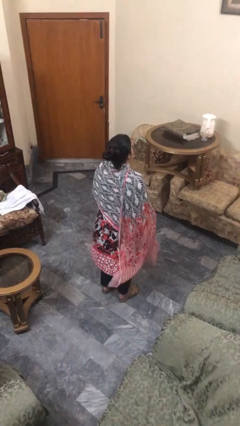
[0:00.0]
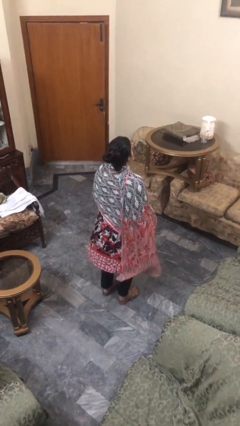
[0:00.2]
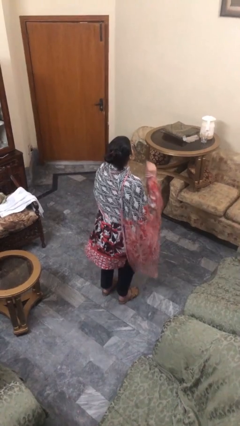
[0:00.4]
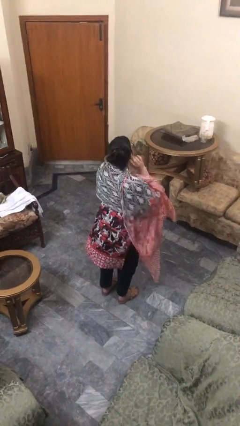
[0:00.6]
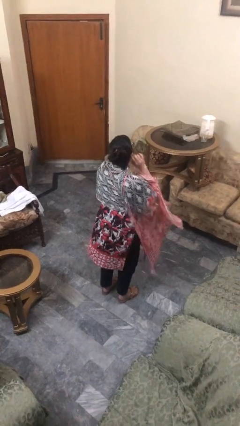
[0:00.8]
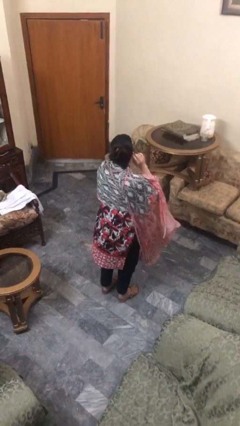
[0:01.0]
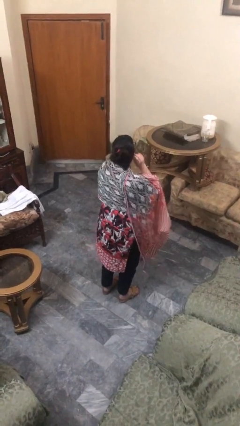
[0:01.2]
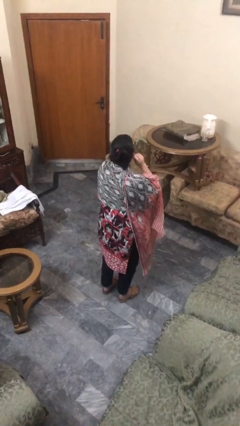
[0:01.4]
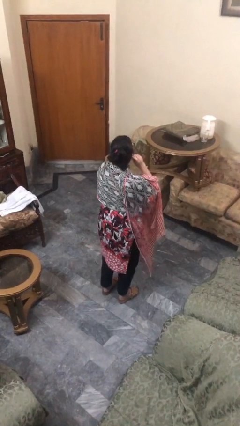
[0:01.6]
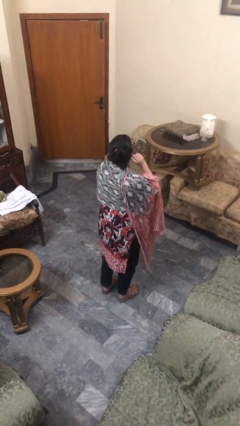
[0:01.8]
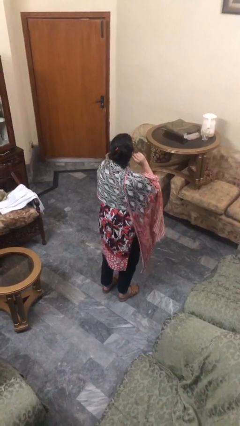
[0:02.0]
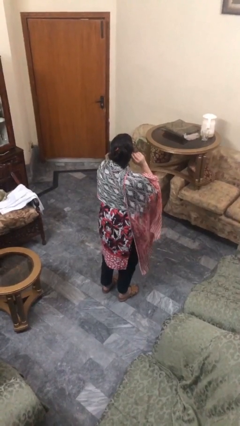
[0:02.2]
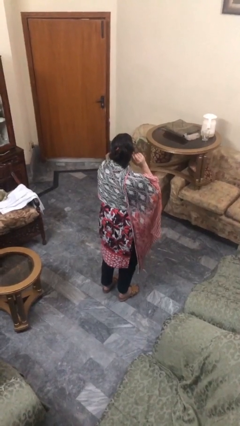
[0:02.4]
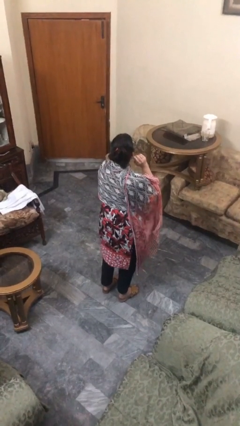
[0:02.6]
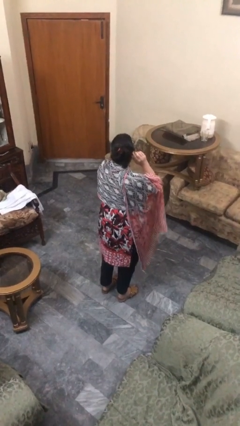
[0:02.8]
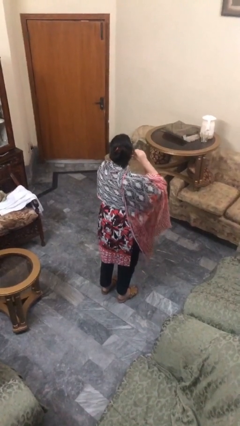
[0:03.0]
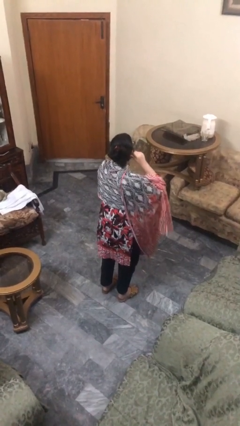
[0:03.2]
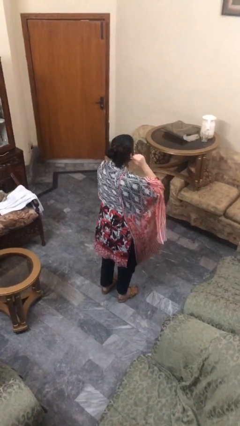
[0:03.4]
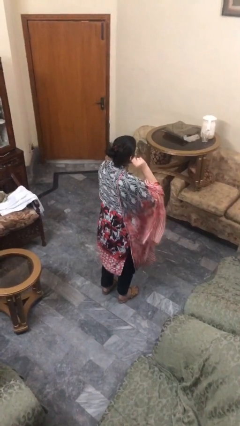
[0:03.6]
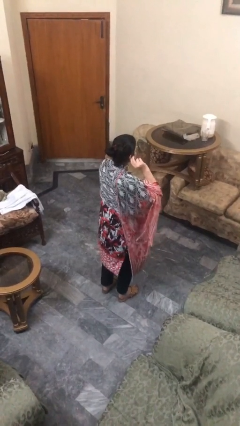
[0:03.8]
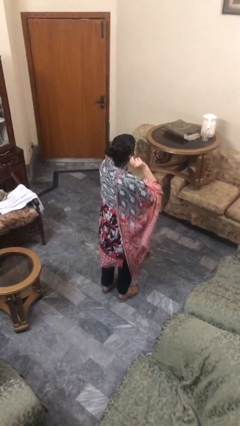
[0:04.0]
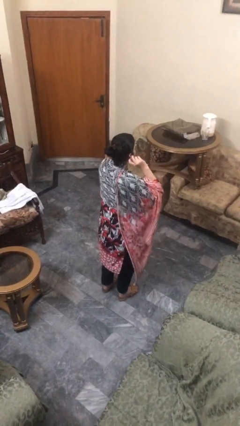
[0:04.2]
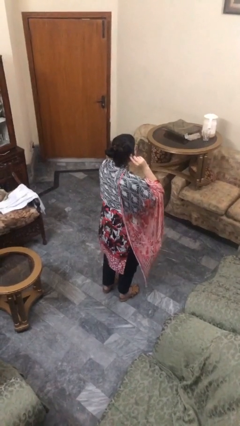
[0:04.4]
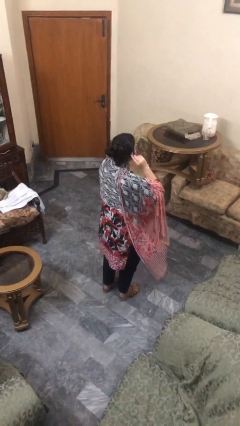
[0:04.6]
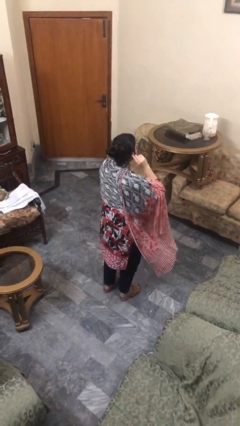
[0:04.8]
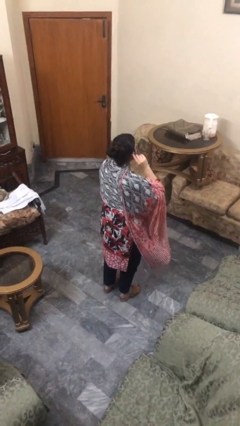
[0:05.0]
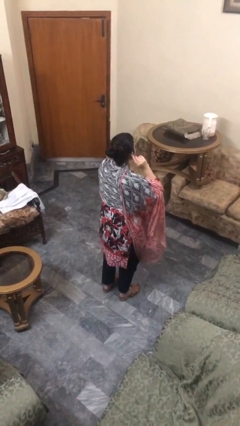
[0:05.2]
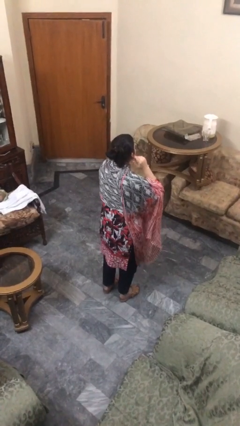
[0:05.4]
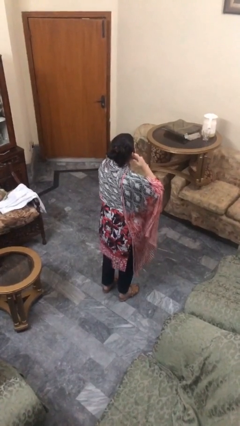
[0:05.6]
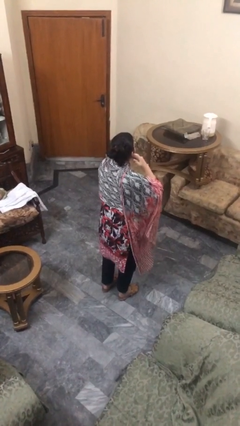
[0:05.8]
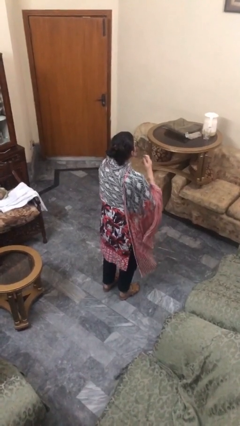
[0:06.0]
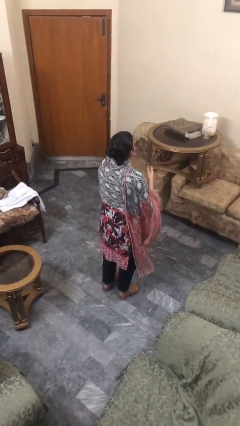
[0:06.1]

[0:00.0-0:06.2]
person touches earlobe

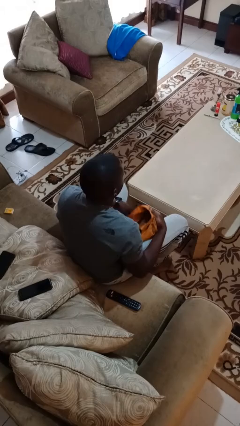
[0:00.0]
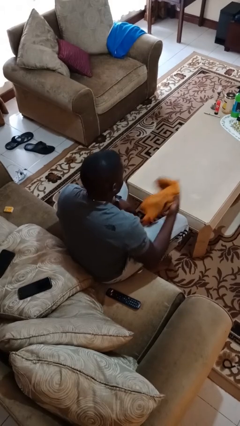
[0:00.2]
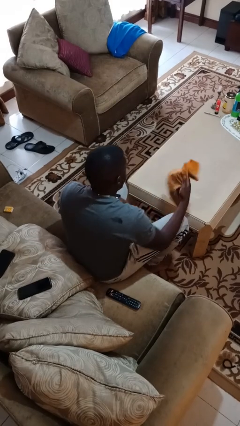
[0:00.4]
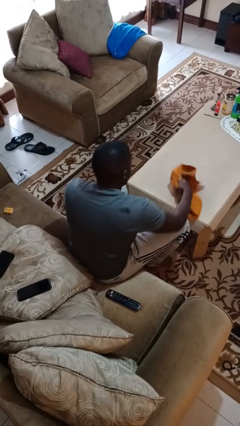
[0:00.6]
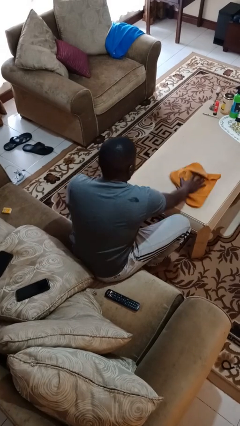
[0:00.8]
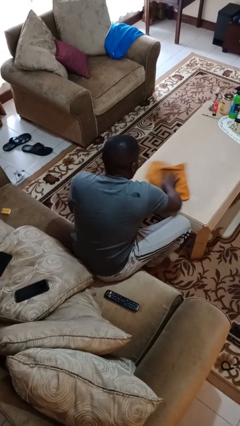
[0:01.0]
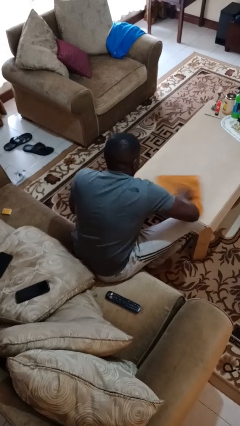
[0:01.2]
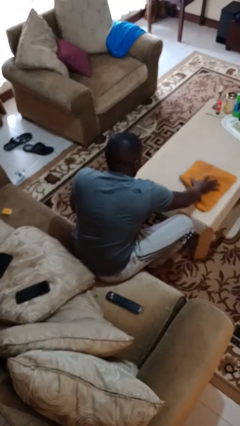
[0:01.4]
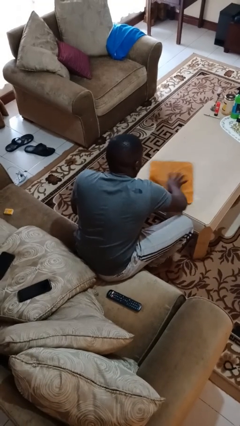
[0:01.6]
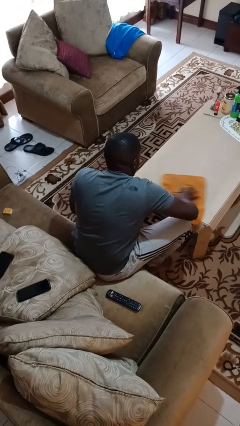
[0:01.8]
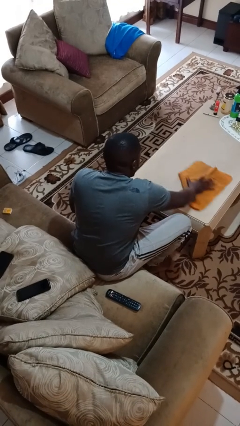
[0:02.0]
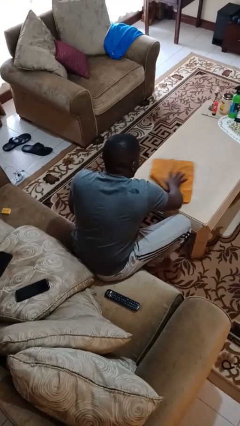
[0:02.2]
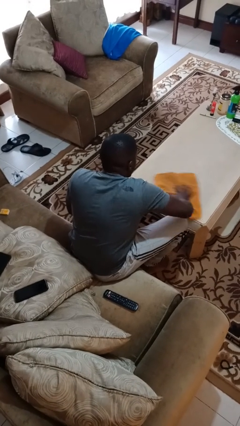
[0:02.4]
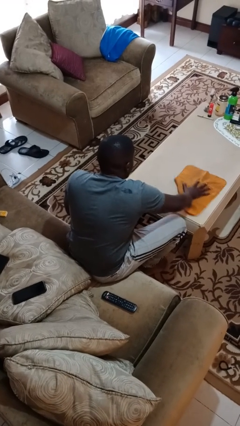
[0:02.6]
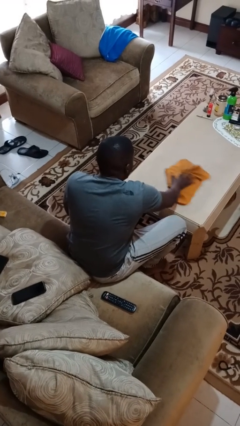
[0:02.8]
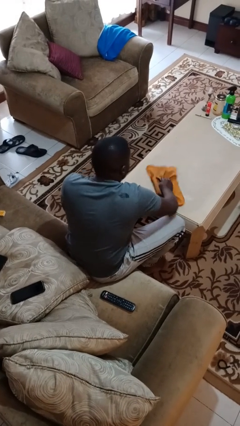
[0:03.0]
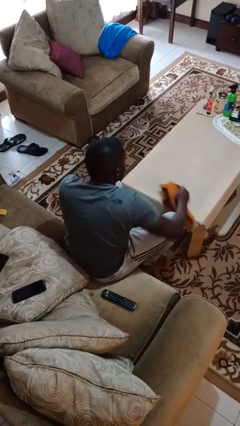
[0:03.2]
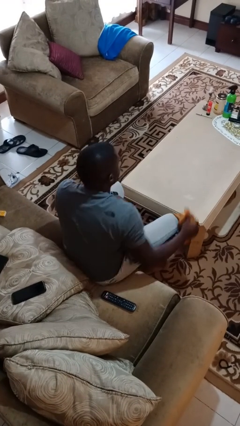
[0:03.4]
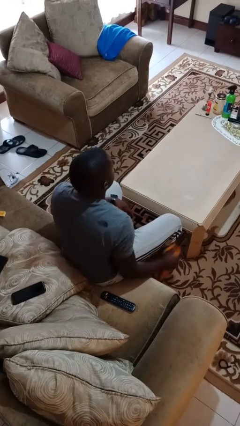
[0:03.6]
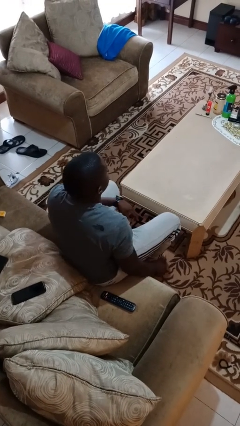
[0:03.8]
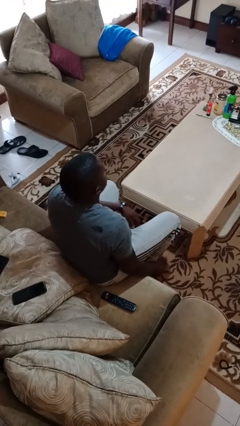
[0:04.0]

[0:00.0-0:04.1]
person cleans table with rag

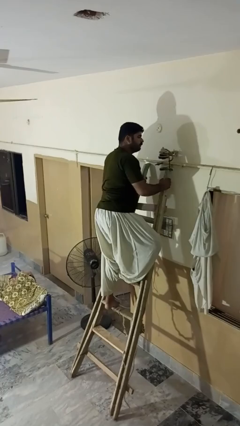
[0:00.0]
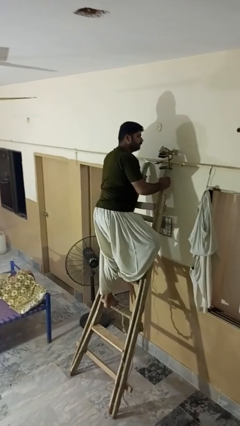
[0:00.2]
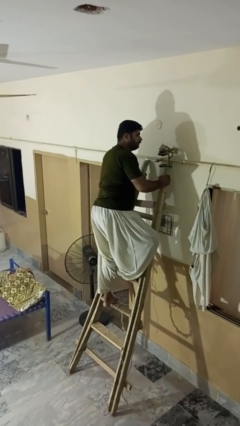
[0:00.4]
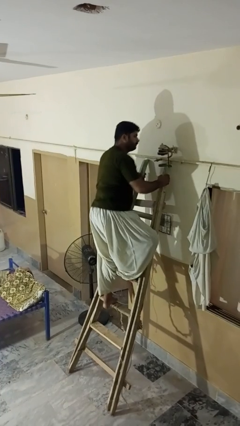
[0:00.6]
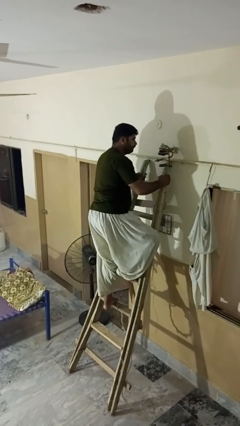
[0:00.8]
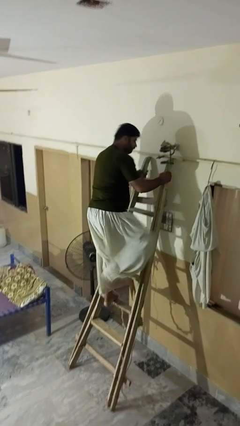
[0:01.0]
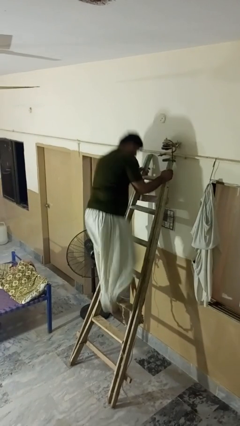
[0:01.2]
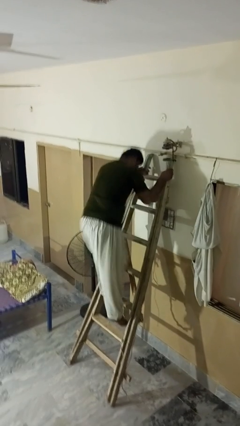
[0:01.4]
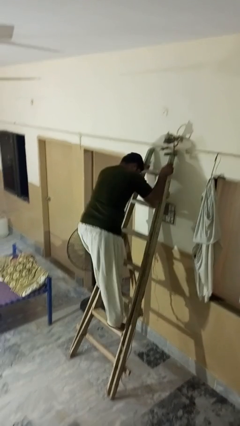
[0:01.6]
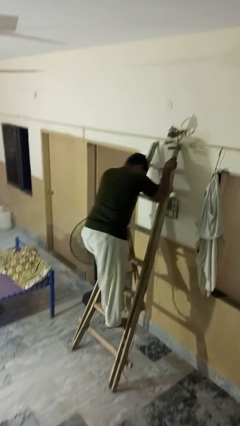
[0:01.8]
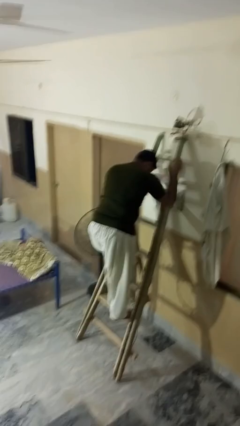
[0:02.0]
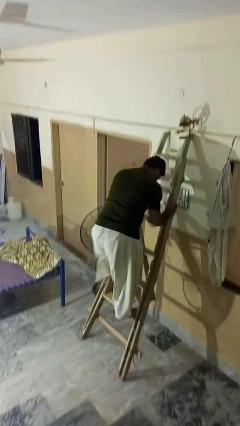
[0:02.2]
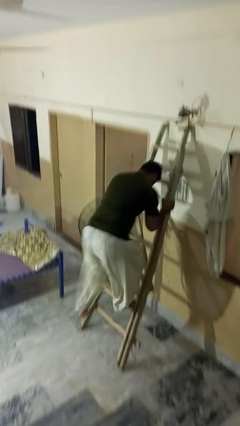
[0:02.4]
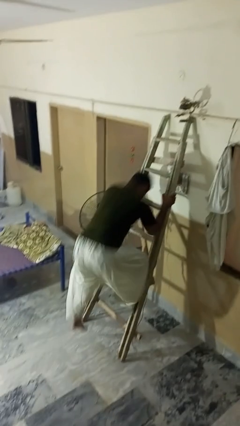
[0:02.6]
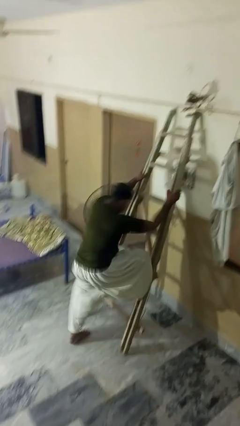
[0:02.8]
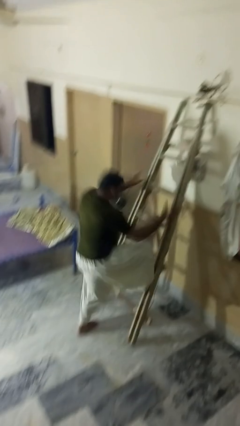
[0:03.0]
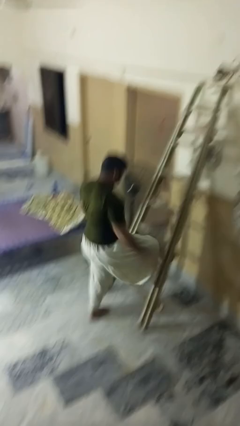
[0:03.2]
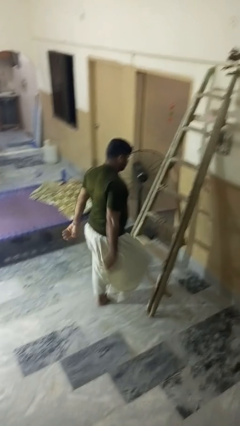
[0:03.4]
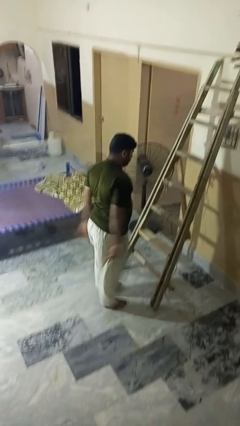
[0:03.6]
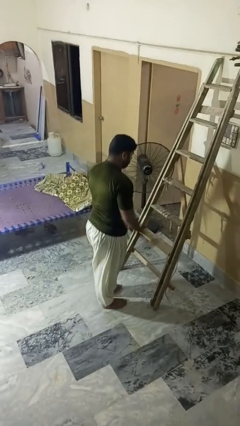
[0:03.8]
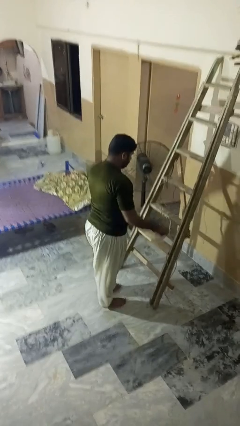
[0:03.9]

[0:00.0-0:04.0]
person climbs down ladder

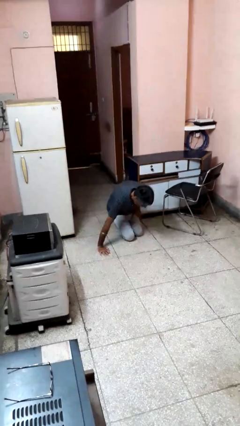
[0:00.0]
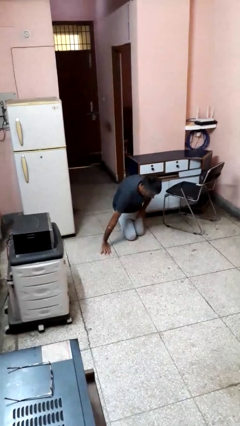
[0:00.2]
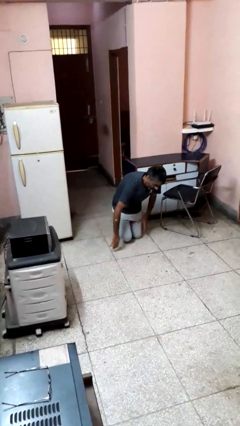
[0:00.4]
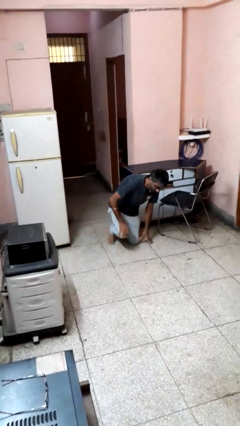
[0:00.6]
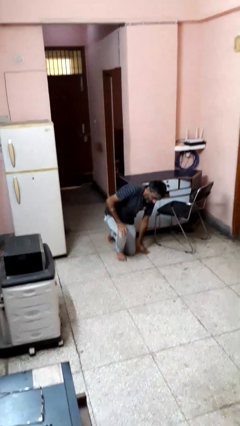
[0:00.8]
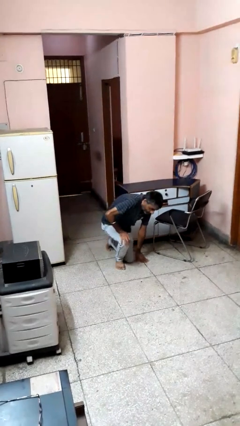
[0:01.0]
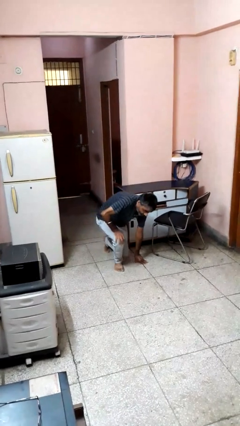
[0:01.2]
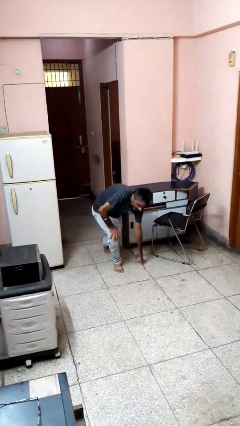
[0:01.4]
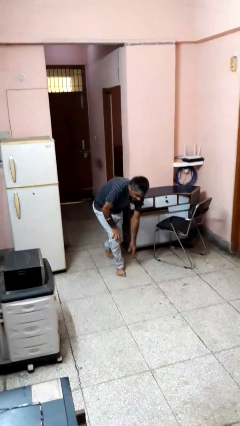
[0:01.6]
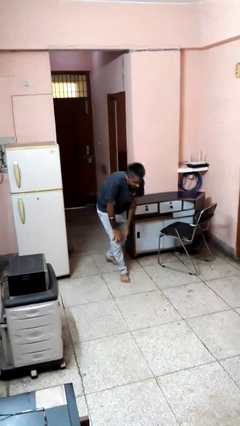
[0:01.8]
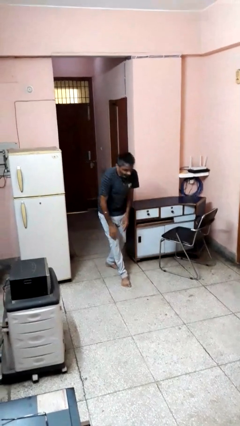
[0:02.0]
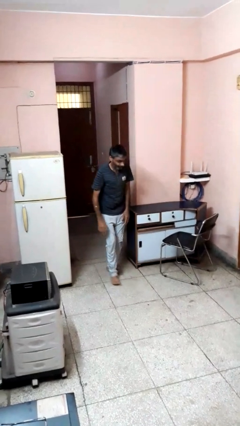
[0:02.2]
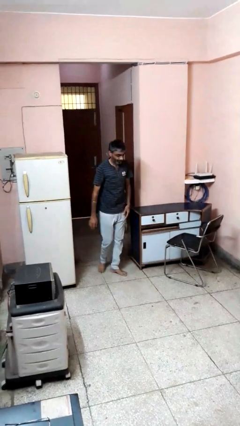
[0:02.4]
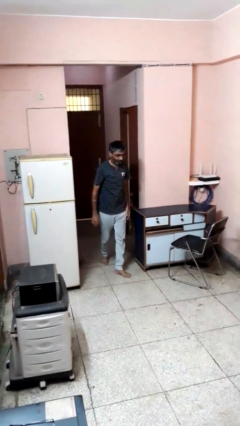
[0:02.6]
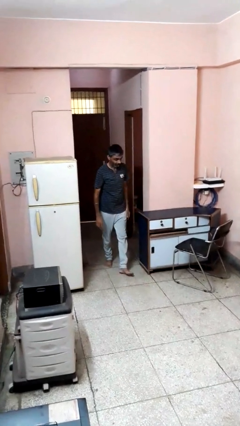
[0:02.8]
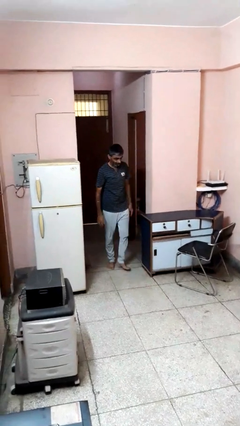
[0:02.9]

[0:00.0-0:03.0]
person stands up from floor

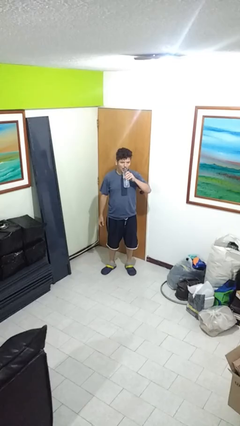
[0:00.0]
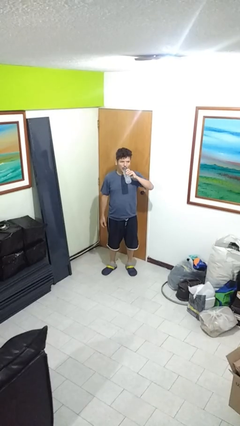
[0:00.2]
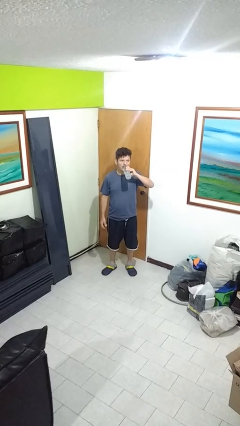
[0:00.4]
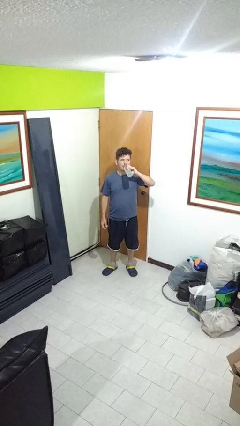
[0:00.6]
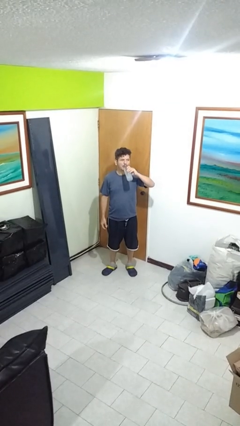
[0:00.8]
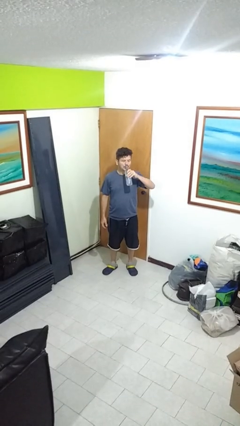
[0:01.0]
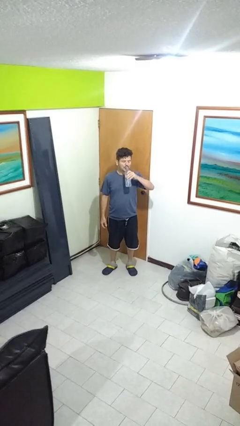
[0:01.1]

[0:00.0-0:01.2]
person drinks from bottle
